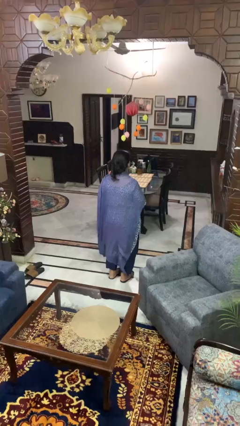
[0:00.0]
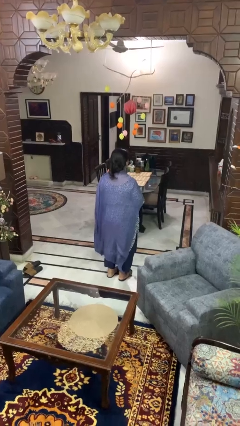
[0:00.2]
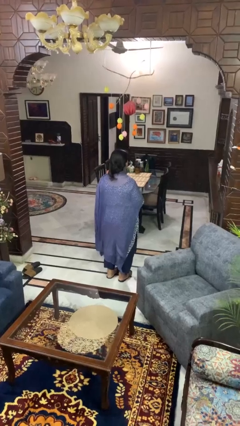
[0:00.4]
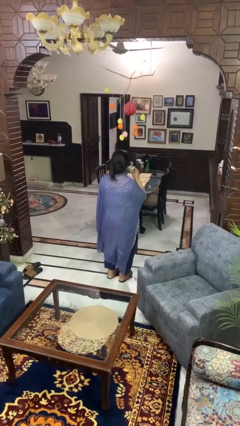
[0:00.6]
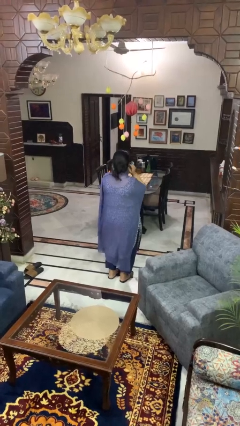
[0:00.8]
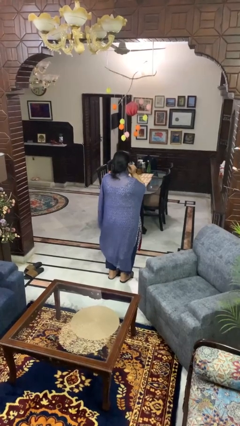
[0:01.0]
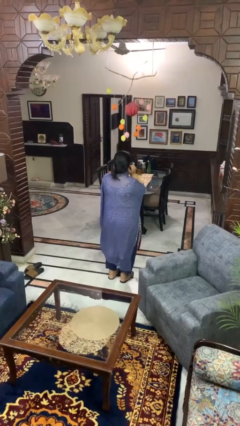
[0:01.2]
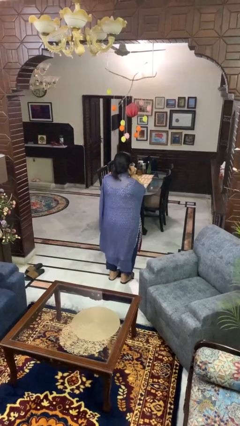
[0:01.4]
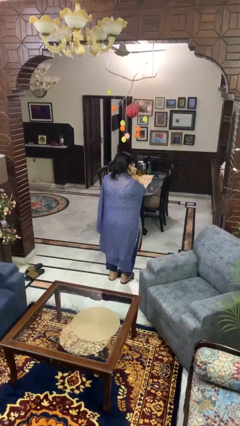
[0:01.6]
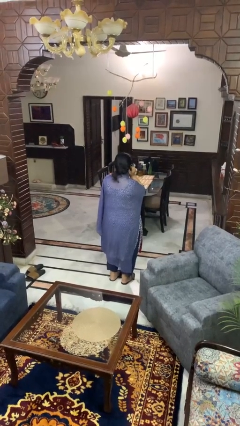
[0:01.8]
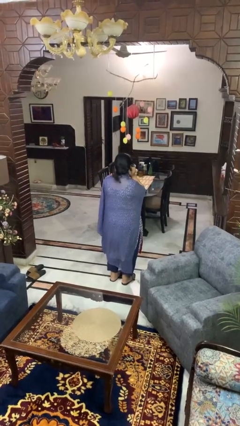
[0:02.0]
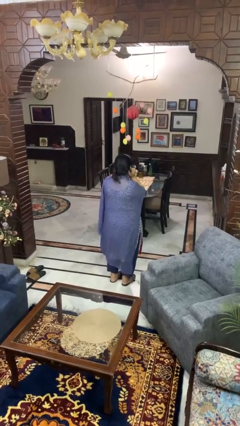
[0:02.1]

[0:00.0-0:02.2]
person puts fingers in ear

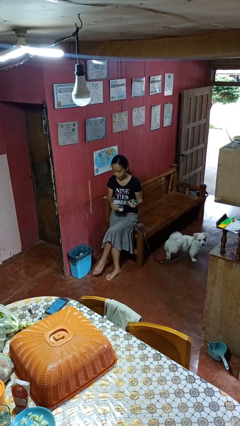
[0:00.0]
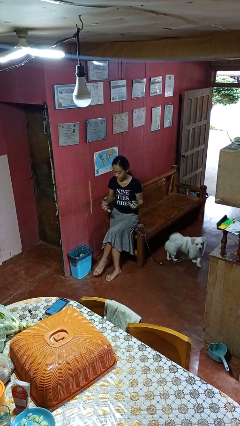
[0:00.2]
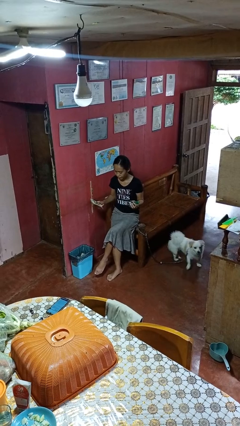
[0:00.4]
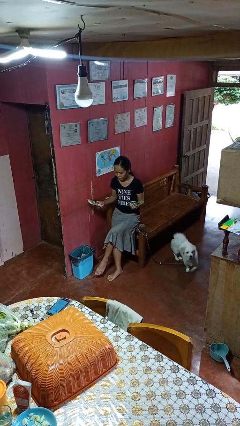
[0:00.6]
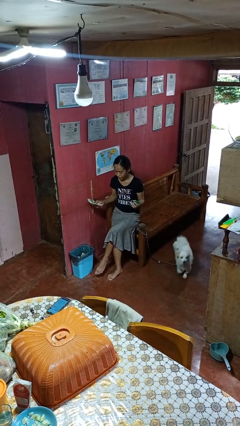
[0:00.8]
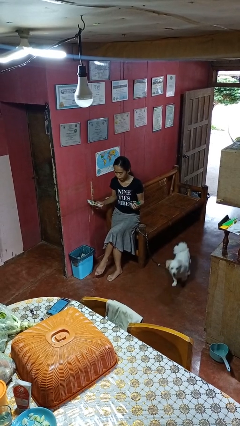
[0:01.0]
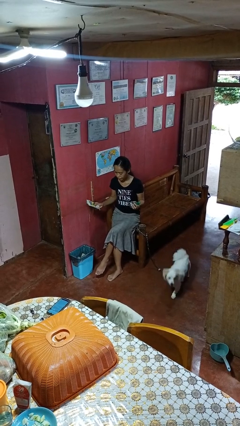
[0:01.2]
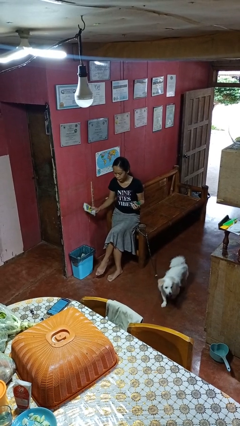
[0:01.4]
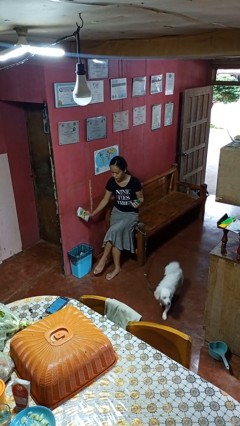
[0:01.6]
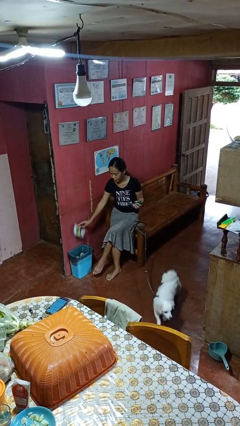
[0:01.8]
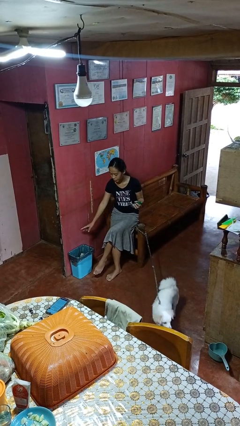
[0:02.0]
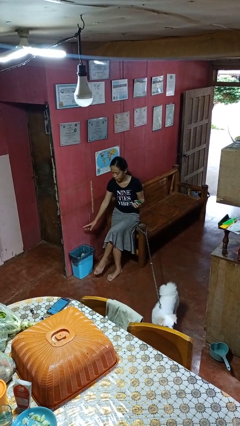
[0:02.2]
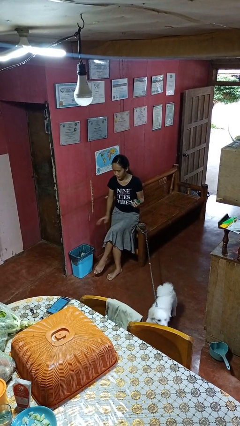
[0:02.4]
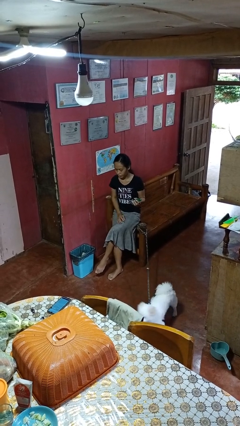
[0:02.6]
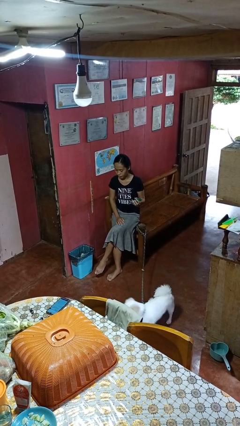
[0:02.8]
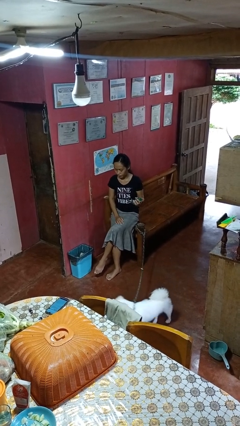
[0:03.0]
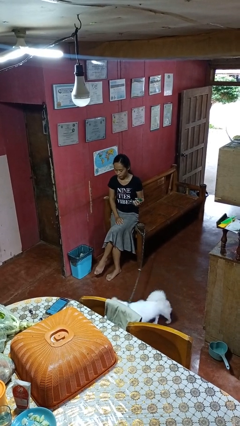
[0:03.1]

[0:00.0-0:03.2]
person discards trash

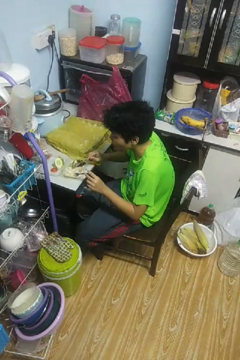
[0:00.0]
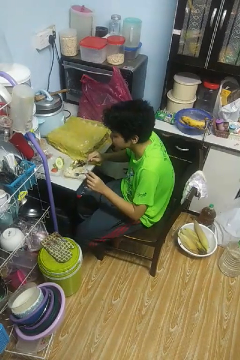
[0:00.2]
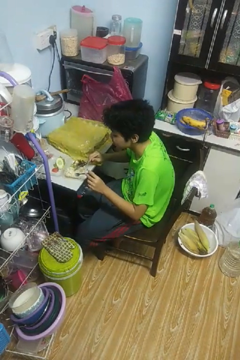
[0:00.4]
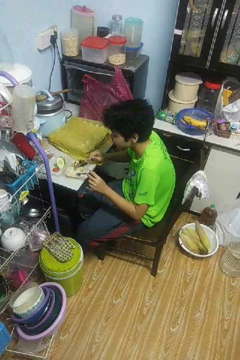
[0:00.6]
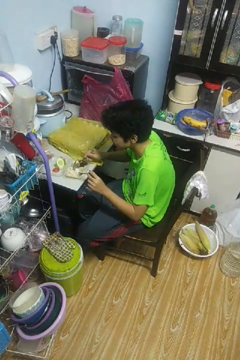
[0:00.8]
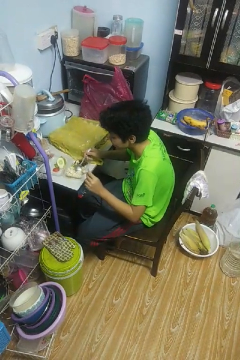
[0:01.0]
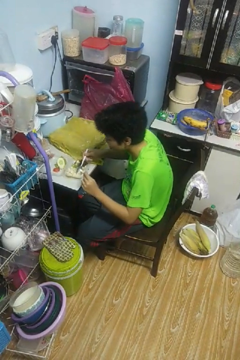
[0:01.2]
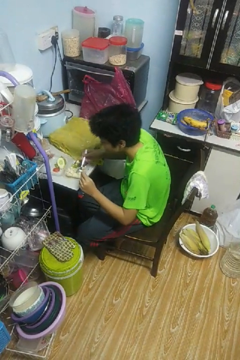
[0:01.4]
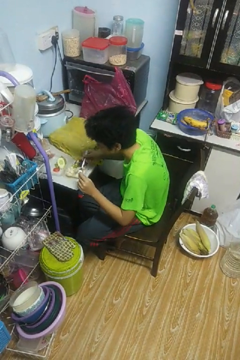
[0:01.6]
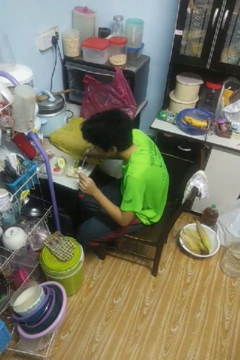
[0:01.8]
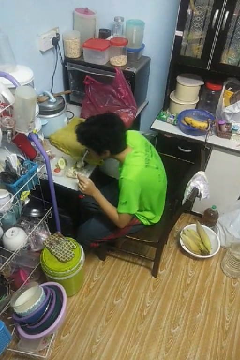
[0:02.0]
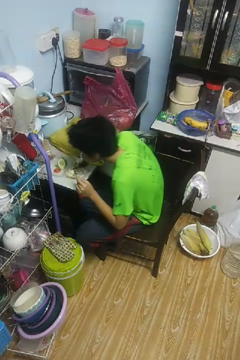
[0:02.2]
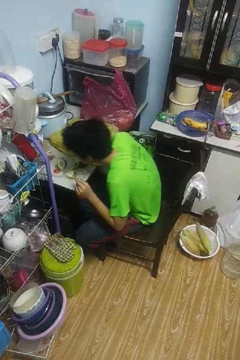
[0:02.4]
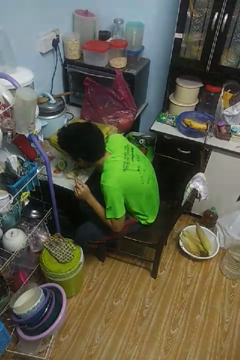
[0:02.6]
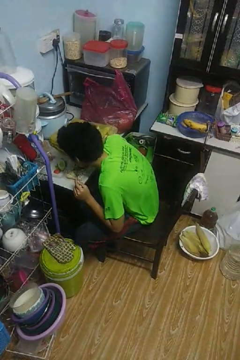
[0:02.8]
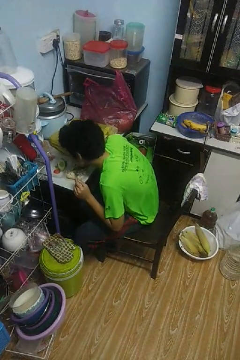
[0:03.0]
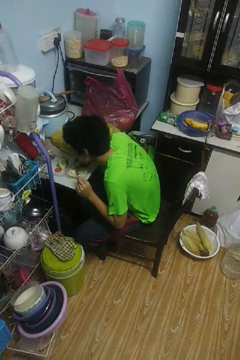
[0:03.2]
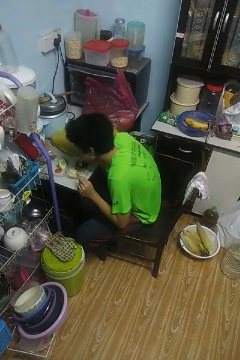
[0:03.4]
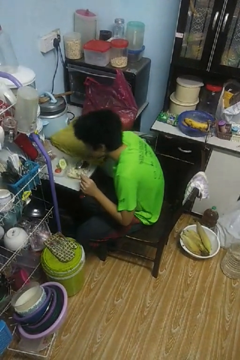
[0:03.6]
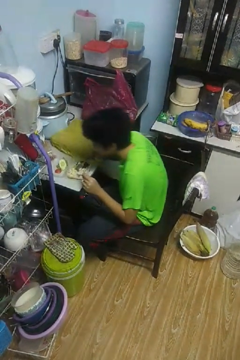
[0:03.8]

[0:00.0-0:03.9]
person eats with utensil

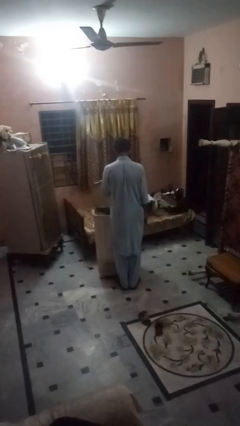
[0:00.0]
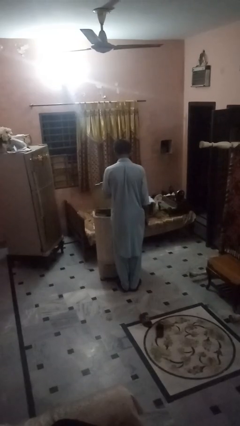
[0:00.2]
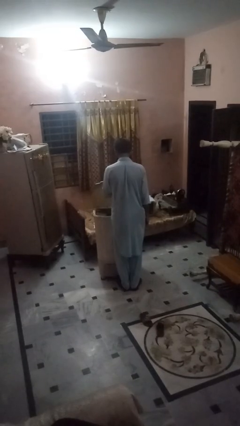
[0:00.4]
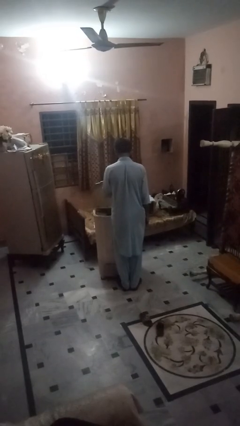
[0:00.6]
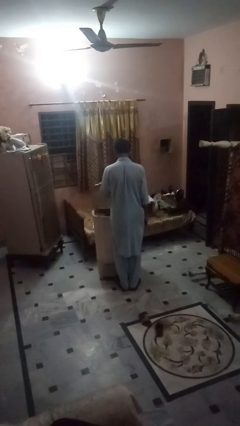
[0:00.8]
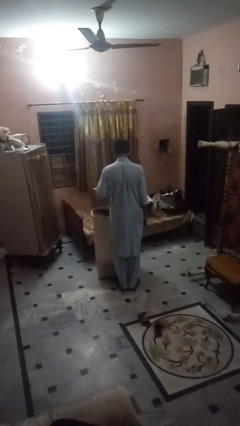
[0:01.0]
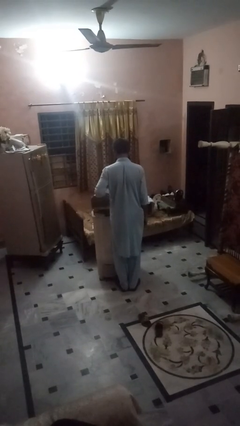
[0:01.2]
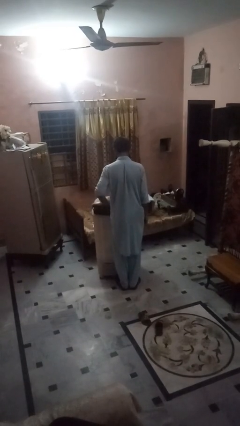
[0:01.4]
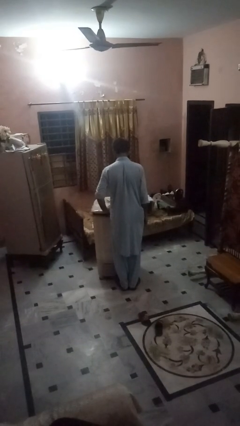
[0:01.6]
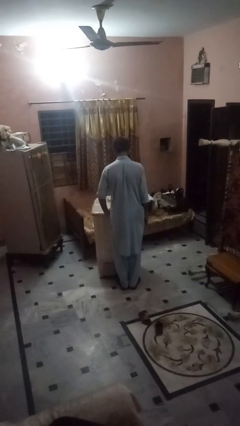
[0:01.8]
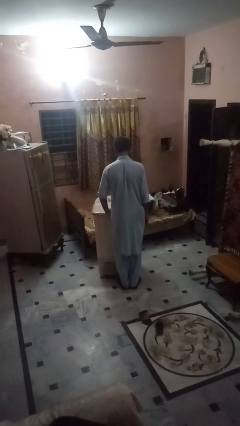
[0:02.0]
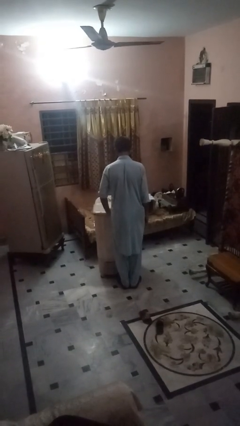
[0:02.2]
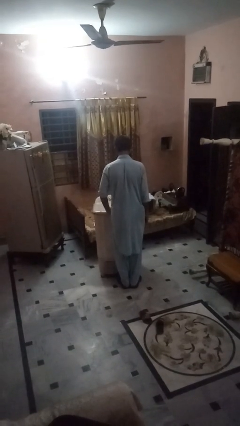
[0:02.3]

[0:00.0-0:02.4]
person closes clothes washer

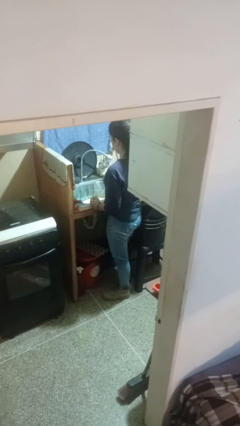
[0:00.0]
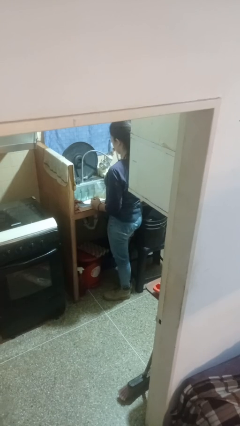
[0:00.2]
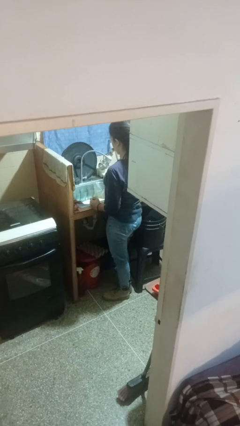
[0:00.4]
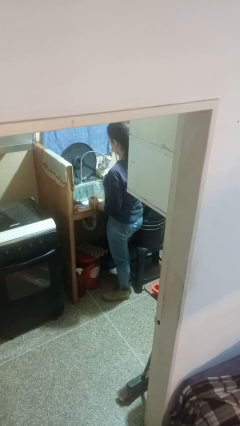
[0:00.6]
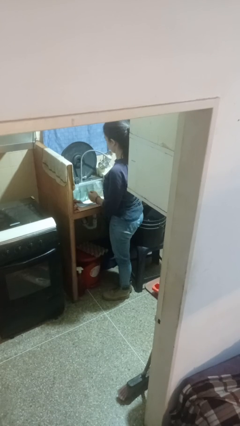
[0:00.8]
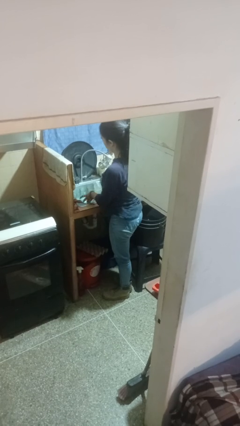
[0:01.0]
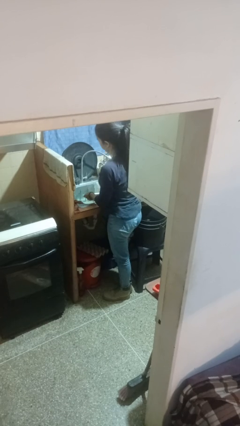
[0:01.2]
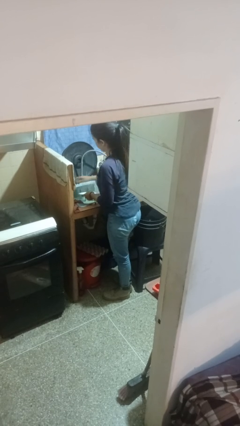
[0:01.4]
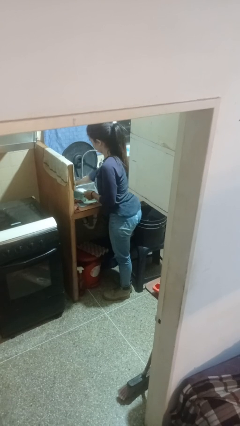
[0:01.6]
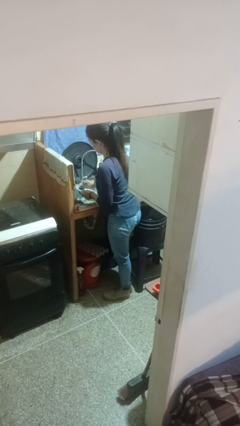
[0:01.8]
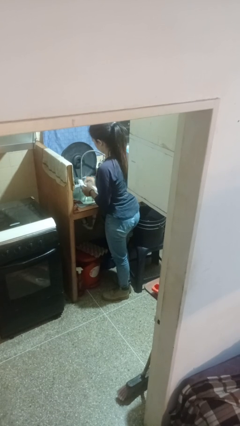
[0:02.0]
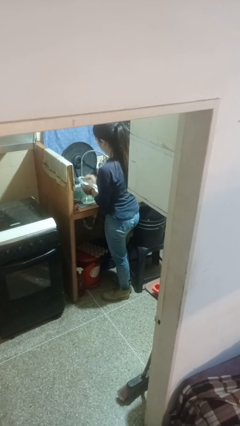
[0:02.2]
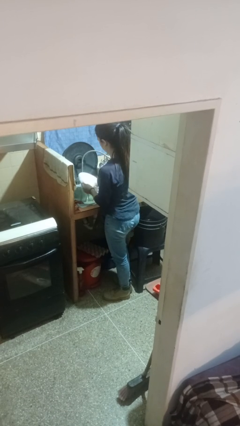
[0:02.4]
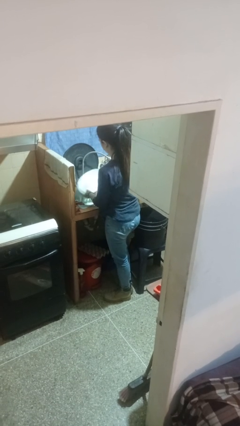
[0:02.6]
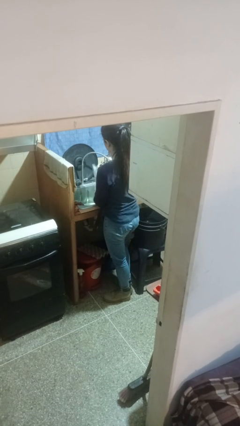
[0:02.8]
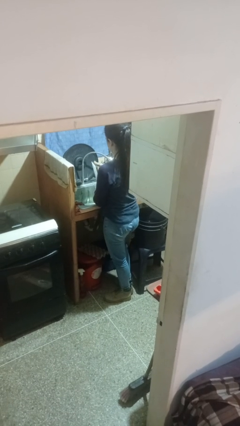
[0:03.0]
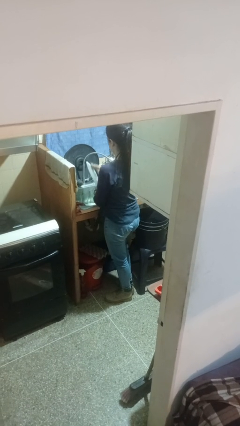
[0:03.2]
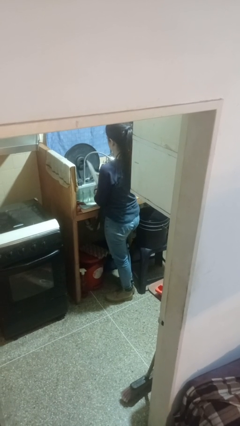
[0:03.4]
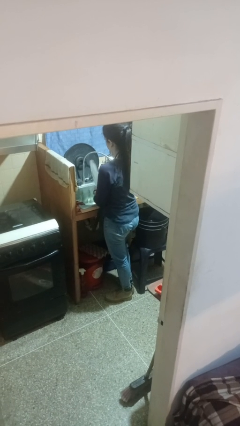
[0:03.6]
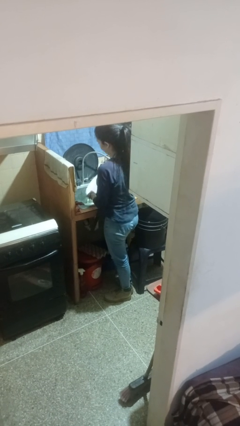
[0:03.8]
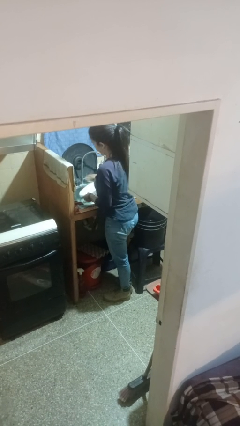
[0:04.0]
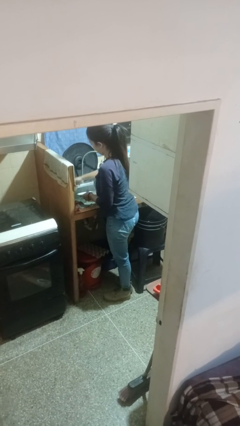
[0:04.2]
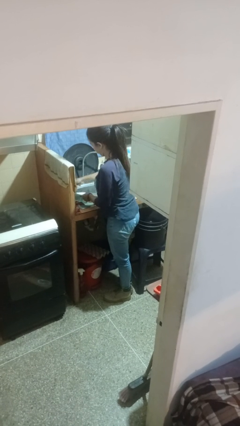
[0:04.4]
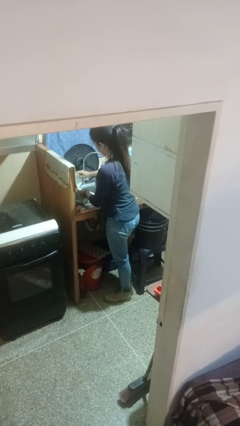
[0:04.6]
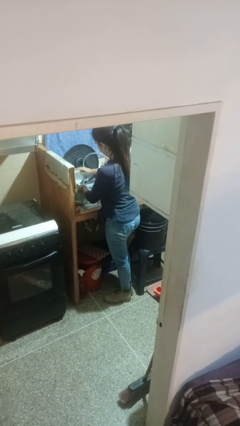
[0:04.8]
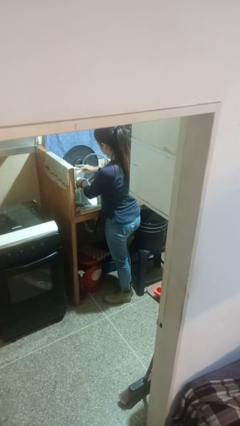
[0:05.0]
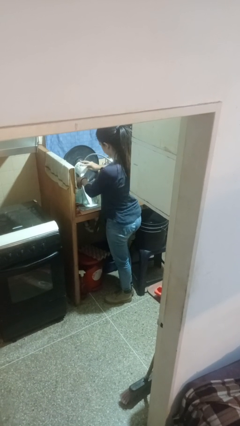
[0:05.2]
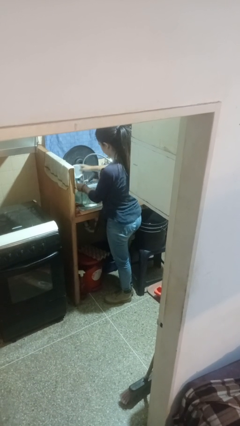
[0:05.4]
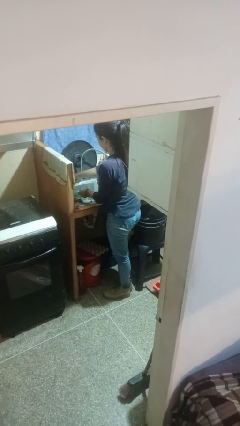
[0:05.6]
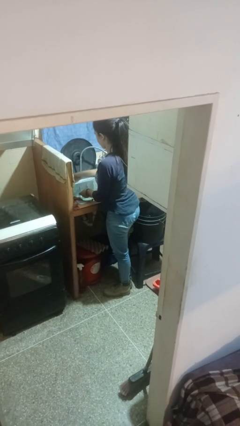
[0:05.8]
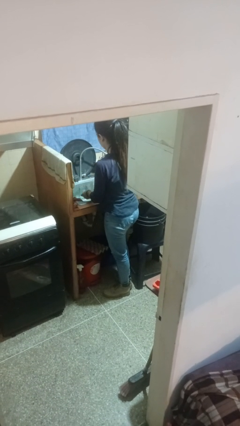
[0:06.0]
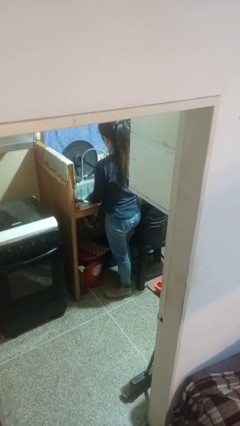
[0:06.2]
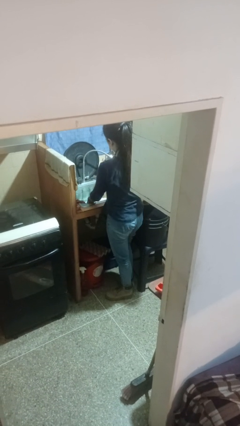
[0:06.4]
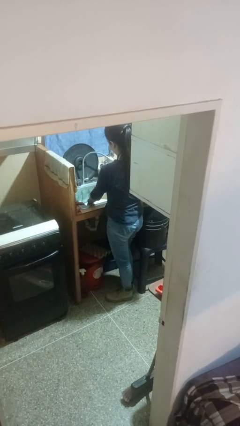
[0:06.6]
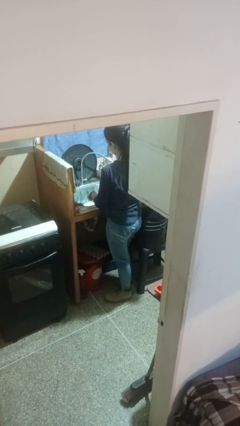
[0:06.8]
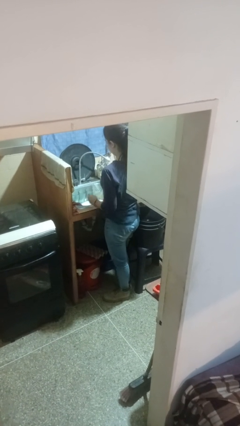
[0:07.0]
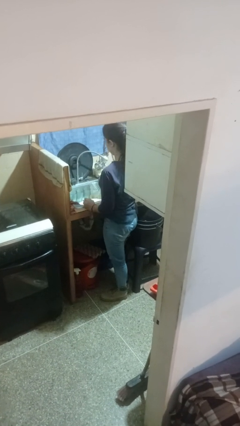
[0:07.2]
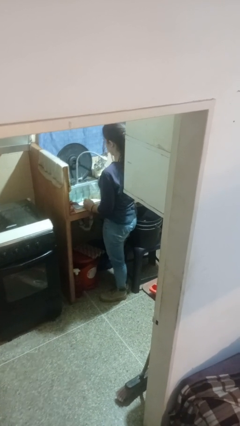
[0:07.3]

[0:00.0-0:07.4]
person washes dish
